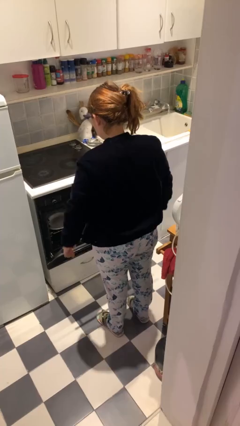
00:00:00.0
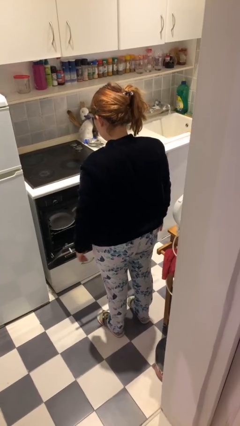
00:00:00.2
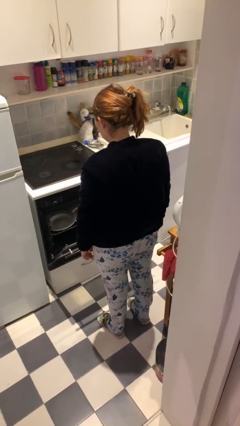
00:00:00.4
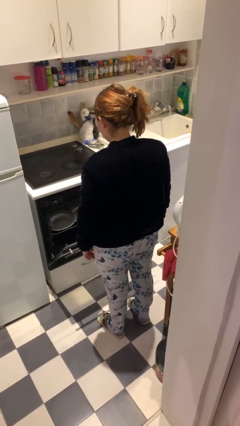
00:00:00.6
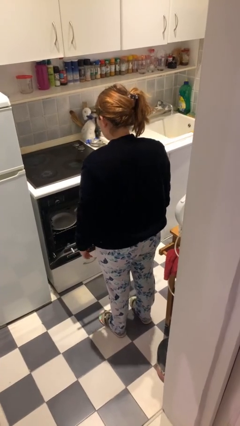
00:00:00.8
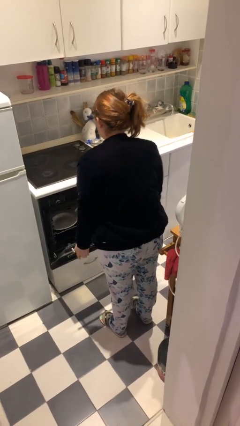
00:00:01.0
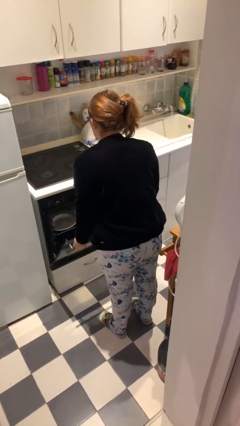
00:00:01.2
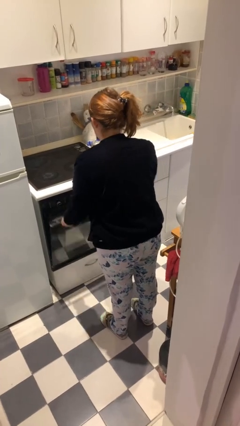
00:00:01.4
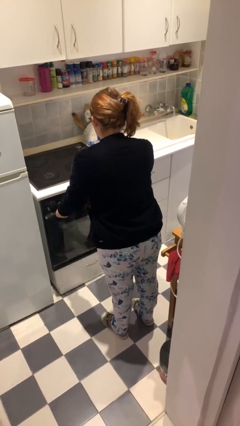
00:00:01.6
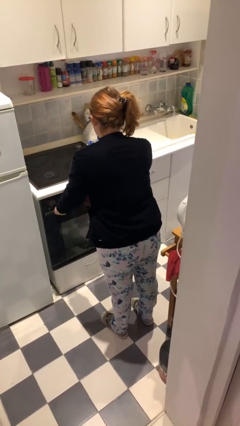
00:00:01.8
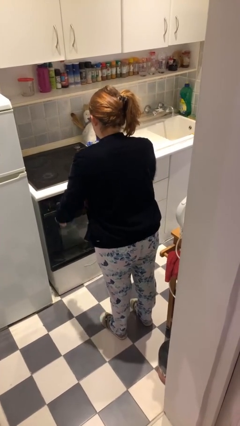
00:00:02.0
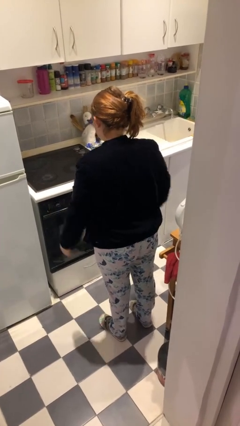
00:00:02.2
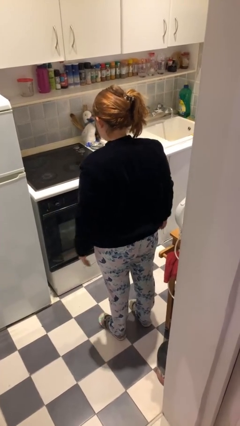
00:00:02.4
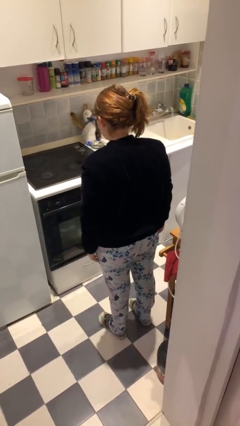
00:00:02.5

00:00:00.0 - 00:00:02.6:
person closes dishwasher

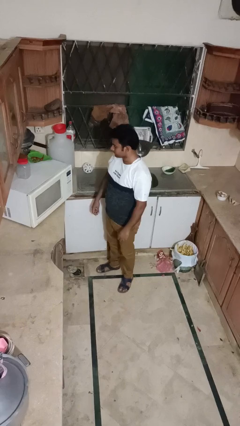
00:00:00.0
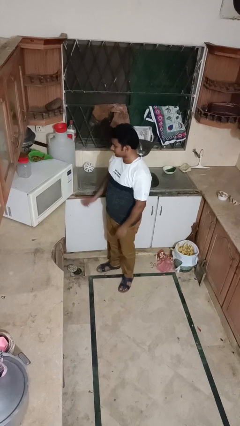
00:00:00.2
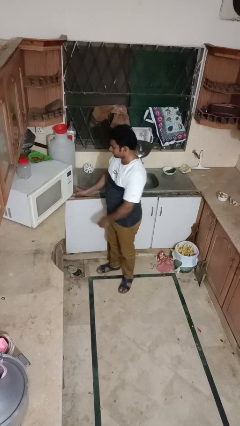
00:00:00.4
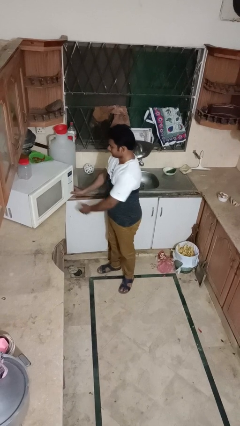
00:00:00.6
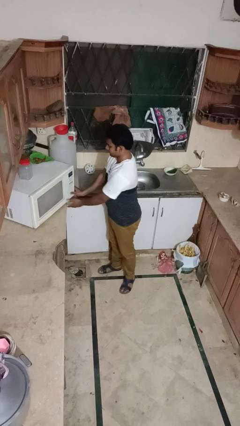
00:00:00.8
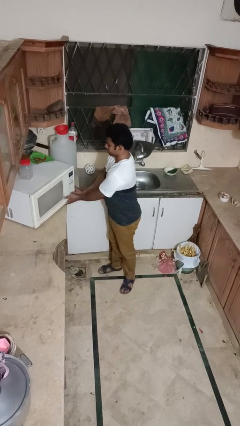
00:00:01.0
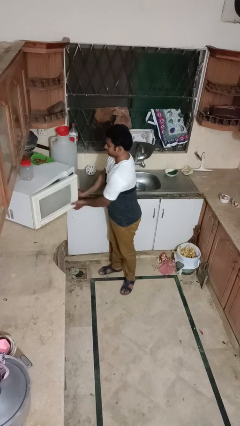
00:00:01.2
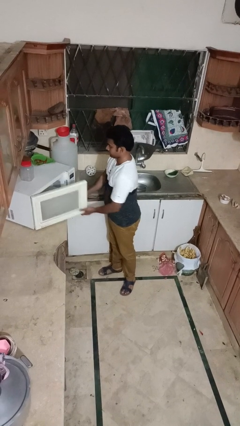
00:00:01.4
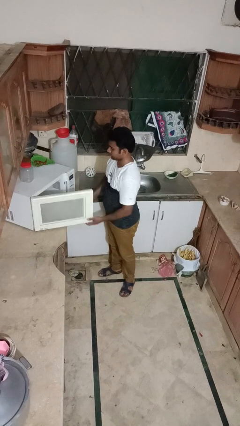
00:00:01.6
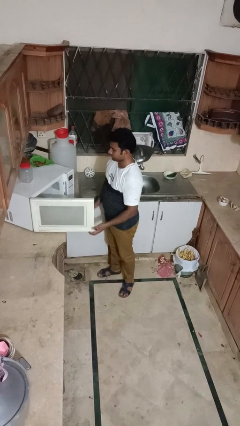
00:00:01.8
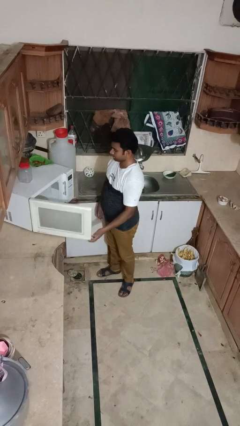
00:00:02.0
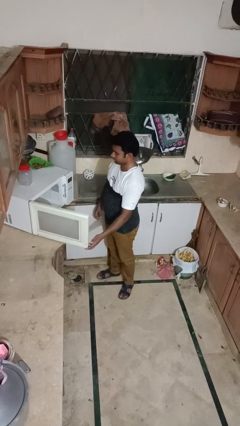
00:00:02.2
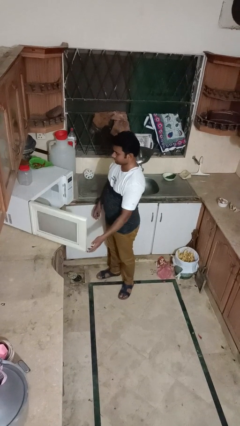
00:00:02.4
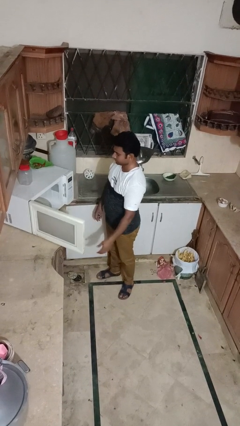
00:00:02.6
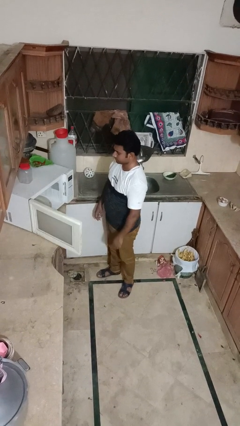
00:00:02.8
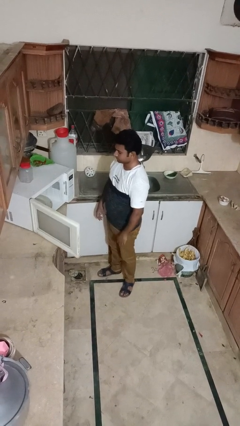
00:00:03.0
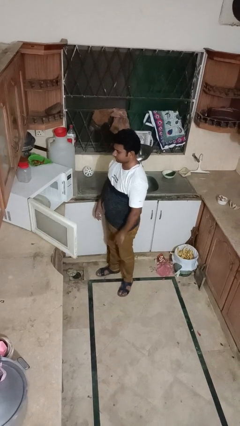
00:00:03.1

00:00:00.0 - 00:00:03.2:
person opens oven door

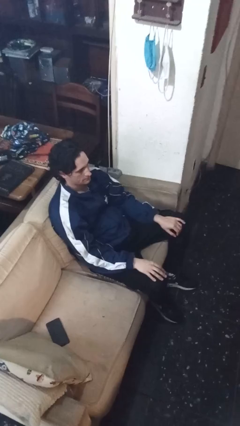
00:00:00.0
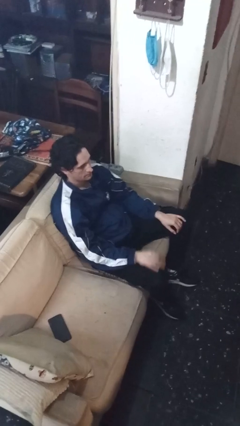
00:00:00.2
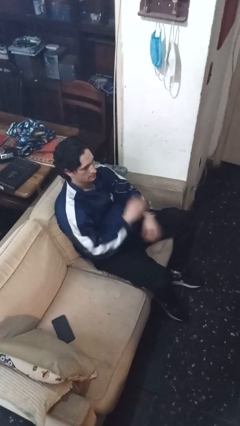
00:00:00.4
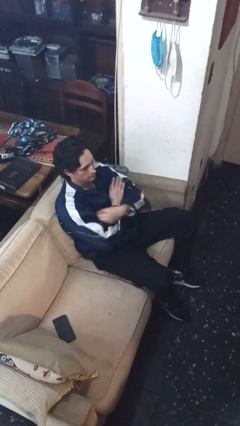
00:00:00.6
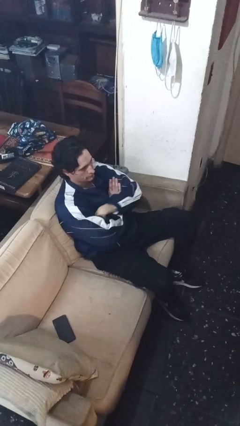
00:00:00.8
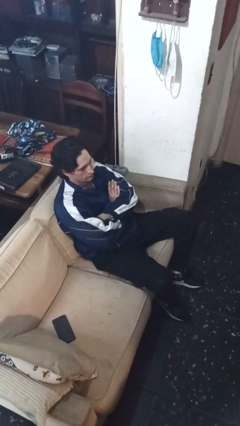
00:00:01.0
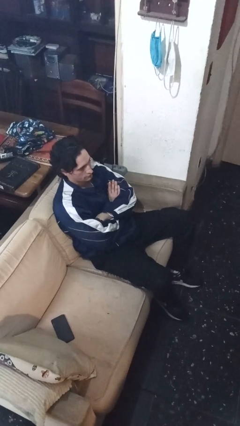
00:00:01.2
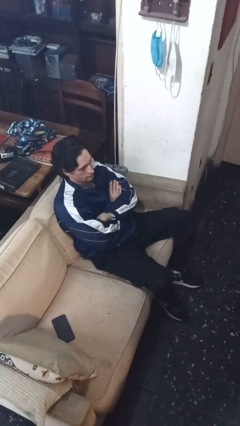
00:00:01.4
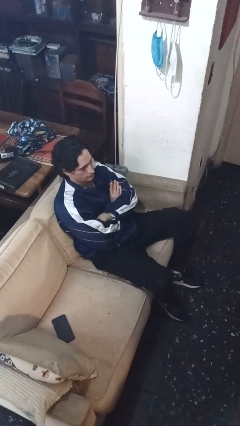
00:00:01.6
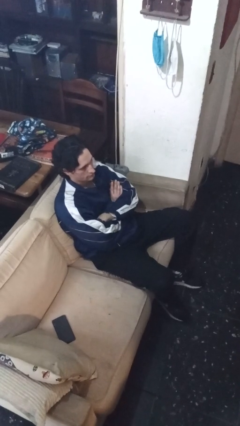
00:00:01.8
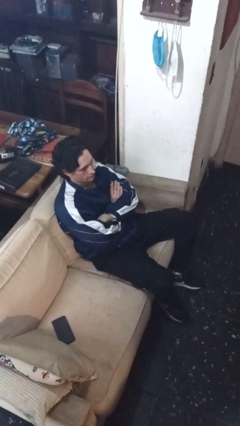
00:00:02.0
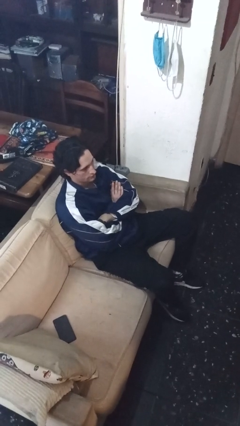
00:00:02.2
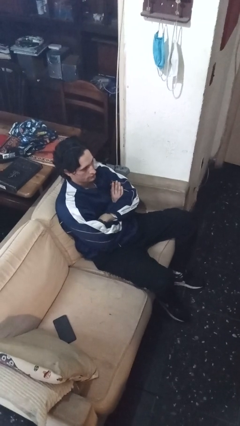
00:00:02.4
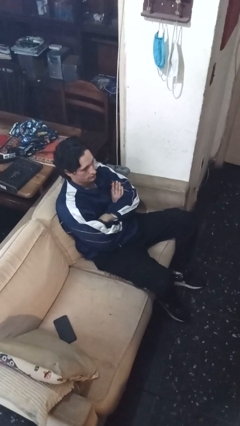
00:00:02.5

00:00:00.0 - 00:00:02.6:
person crosses arms

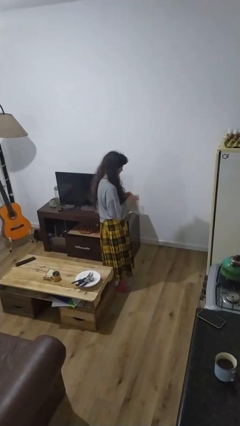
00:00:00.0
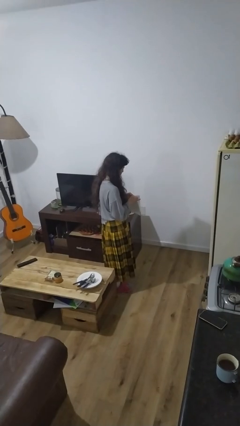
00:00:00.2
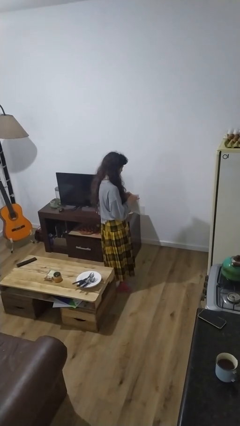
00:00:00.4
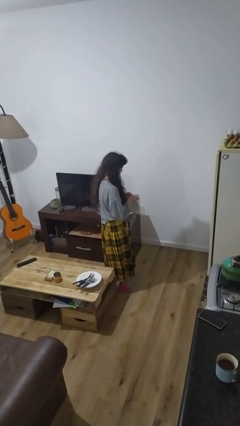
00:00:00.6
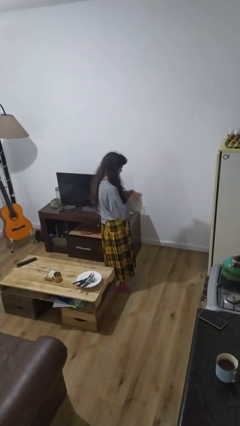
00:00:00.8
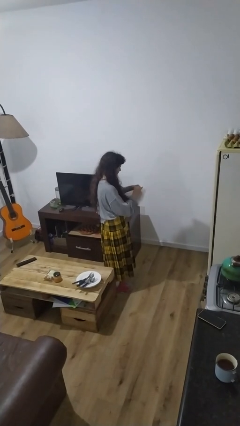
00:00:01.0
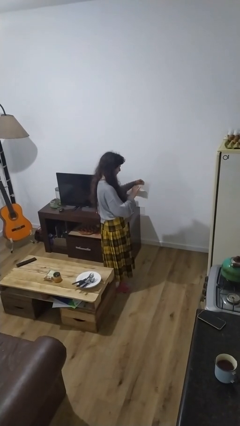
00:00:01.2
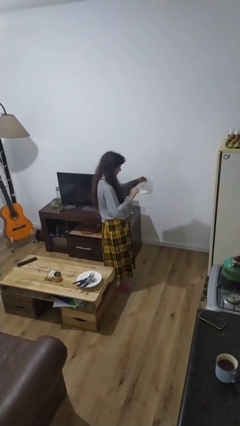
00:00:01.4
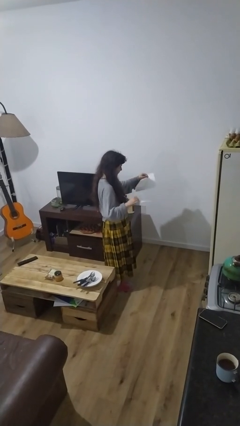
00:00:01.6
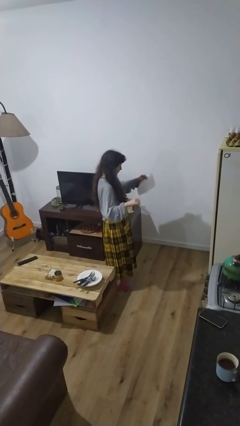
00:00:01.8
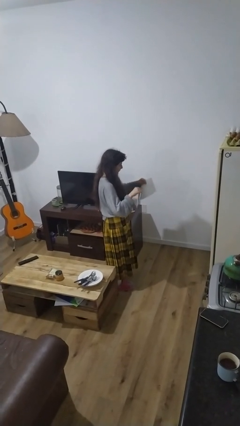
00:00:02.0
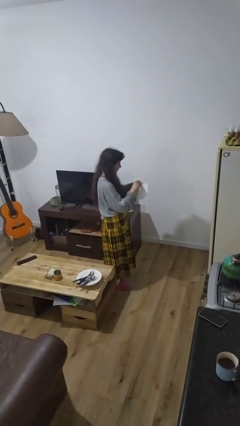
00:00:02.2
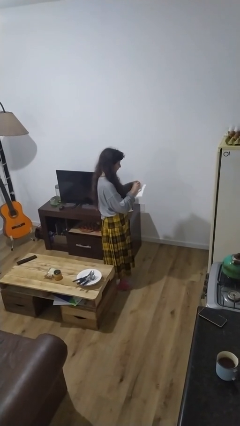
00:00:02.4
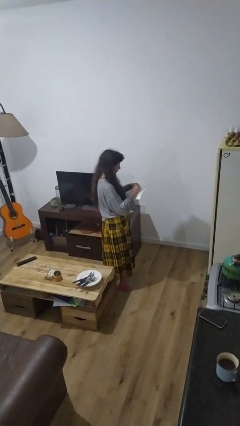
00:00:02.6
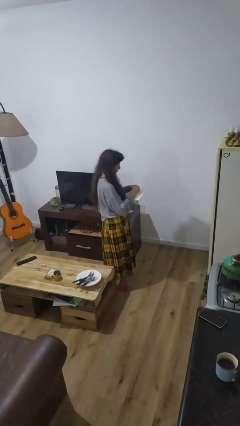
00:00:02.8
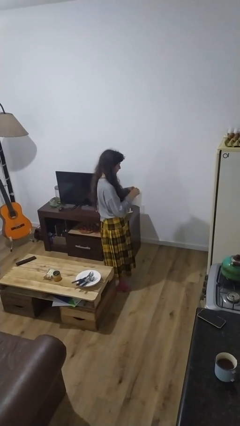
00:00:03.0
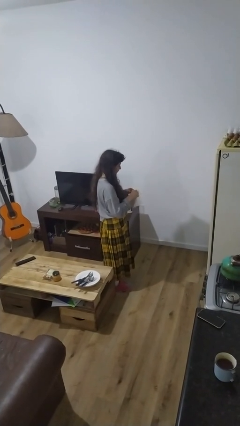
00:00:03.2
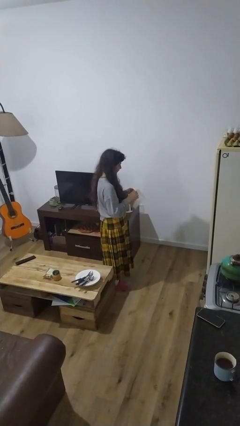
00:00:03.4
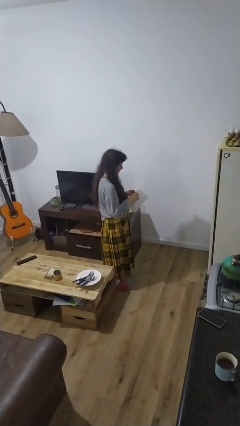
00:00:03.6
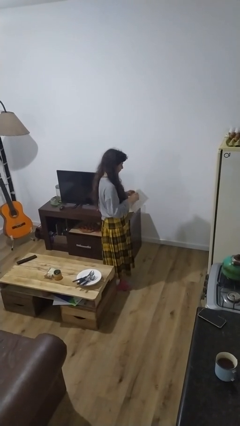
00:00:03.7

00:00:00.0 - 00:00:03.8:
person tears paper

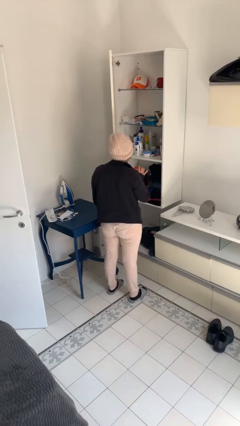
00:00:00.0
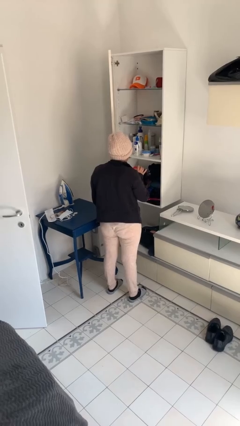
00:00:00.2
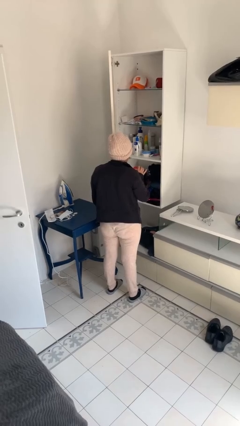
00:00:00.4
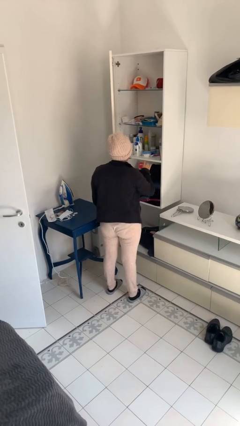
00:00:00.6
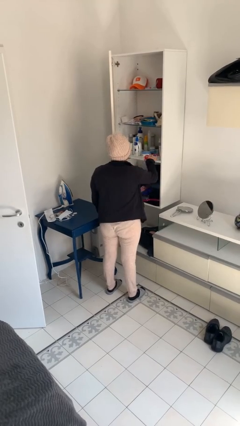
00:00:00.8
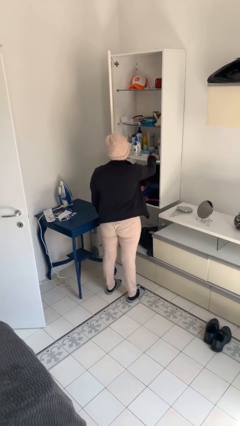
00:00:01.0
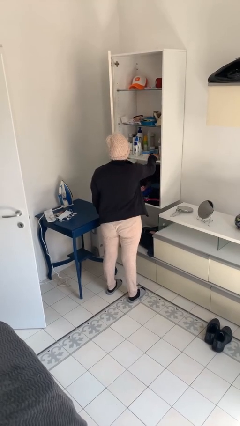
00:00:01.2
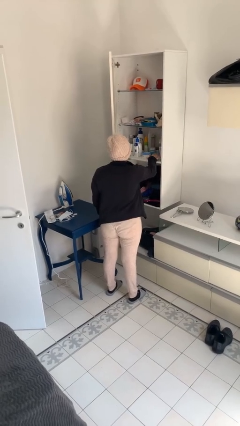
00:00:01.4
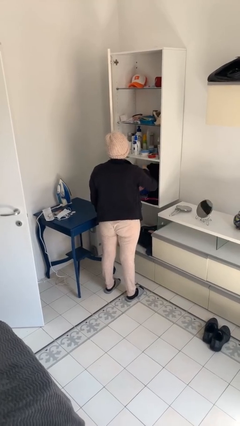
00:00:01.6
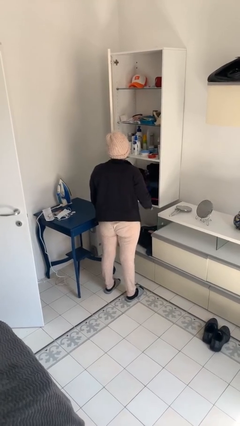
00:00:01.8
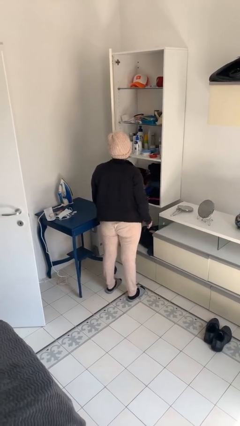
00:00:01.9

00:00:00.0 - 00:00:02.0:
person puts down object on shelf

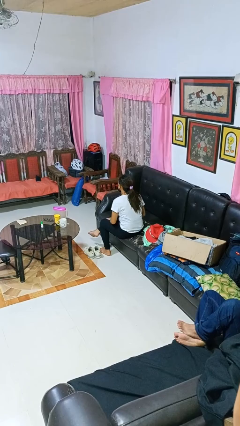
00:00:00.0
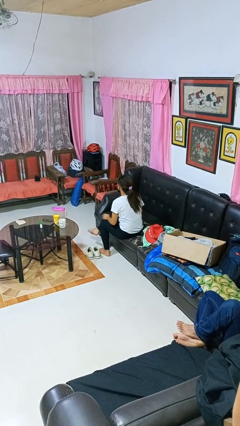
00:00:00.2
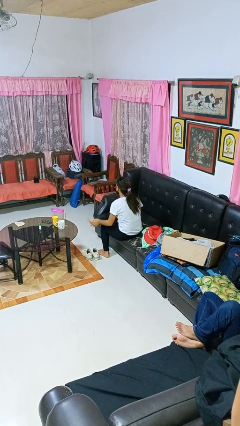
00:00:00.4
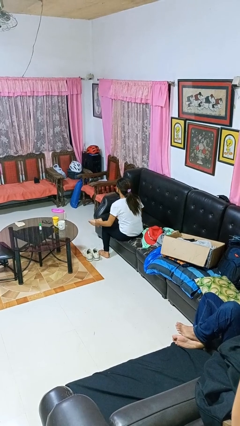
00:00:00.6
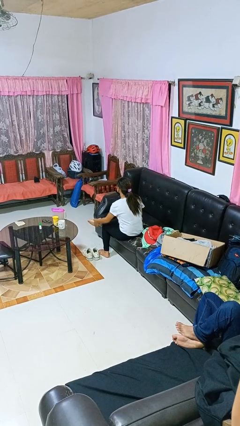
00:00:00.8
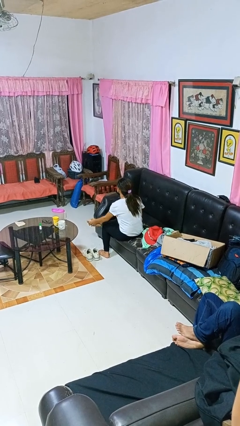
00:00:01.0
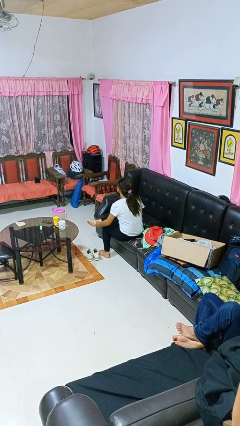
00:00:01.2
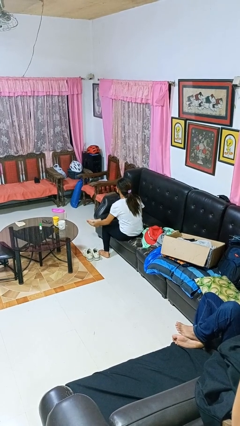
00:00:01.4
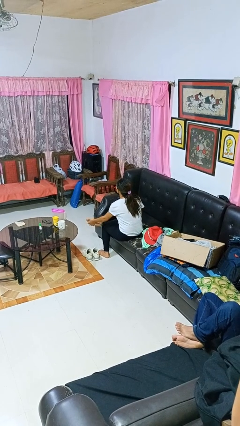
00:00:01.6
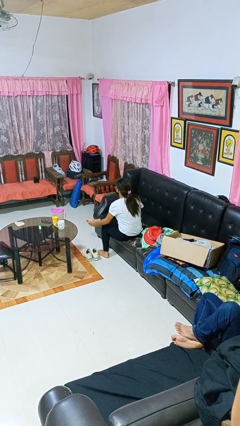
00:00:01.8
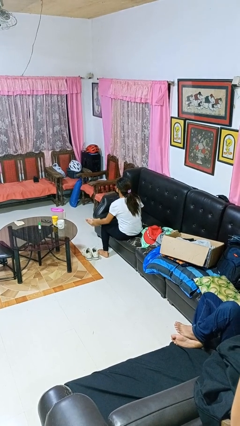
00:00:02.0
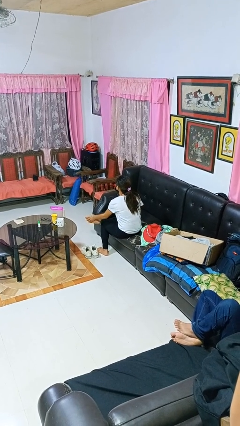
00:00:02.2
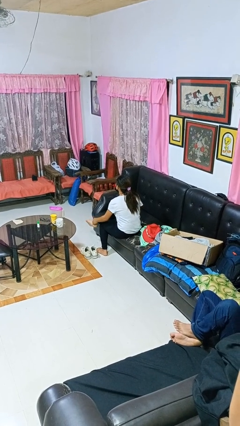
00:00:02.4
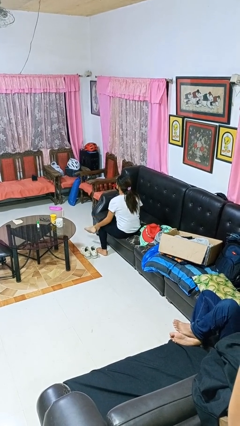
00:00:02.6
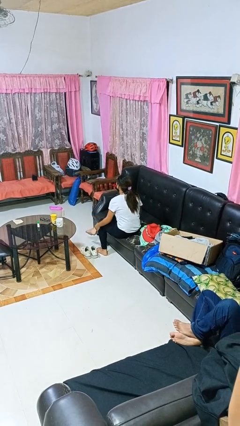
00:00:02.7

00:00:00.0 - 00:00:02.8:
person rubs foot

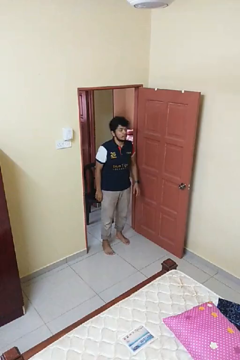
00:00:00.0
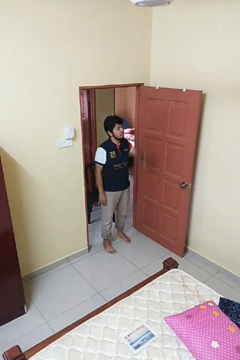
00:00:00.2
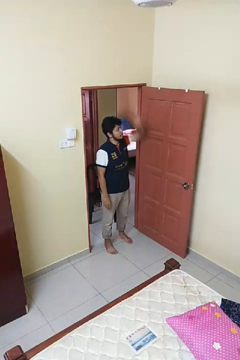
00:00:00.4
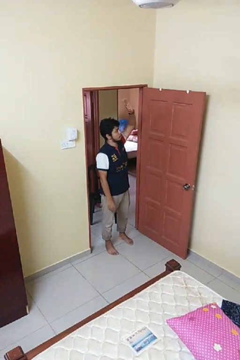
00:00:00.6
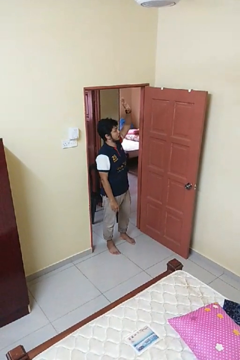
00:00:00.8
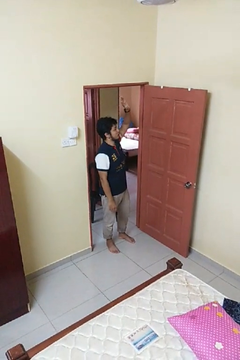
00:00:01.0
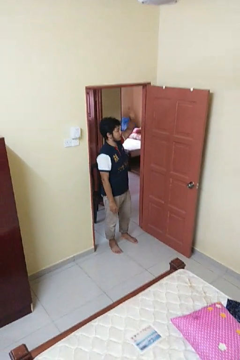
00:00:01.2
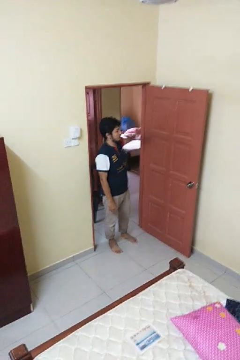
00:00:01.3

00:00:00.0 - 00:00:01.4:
person gestures raise hand
